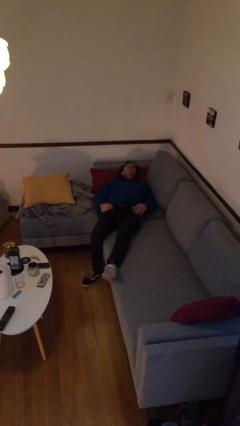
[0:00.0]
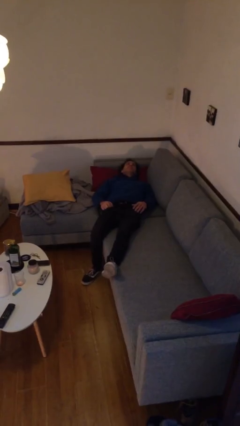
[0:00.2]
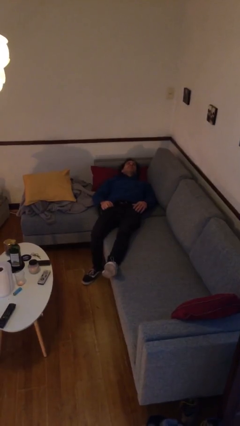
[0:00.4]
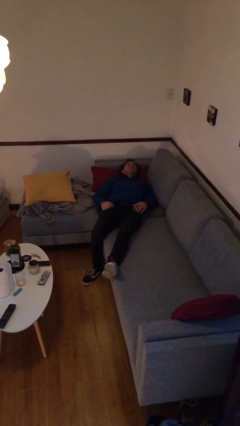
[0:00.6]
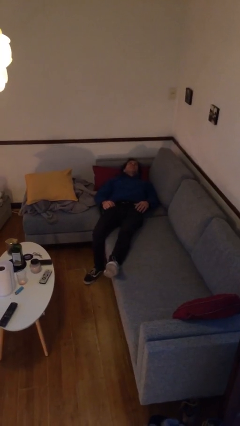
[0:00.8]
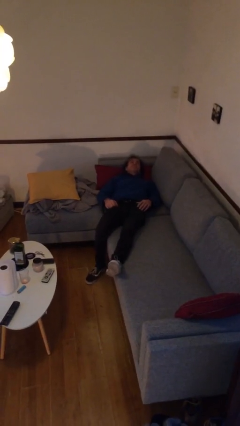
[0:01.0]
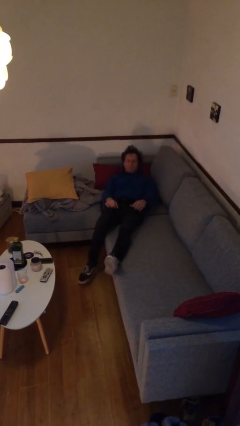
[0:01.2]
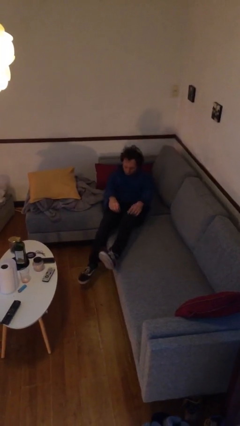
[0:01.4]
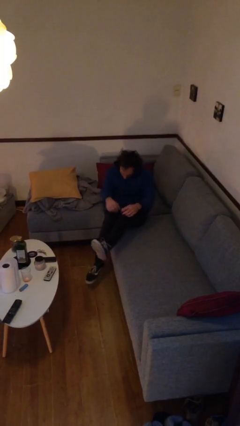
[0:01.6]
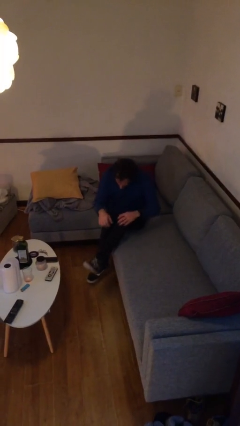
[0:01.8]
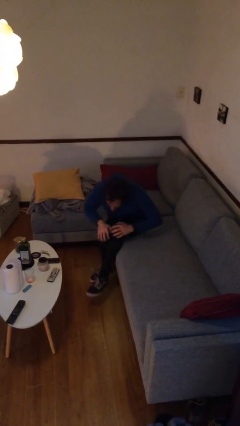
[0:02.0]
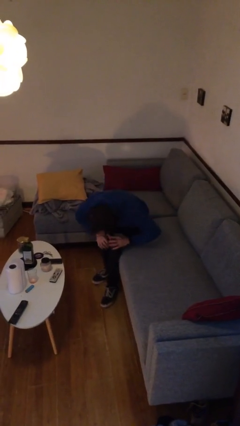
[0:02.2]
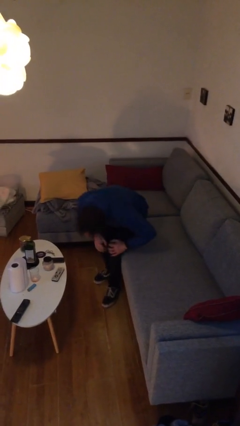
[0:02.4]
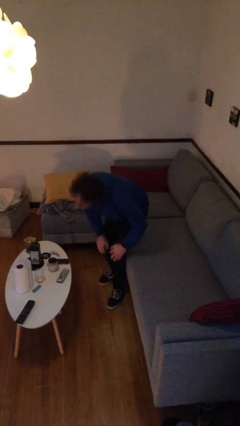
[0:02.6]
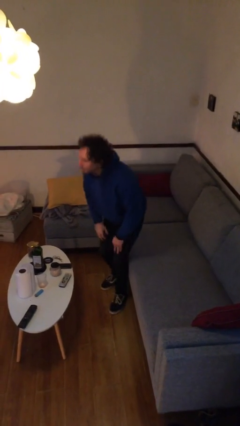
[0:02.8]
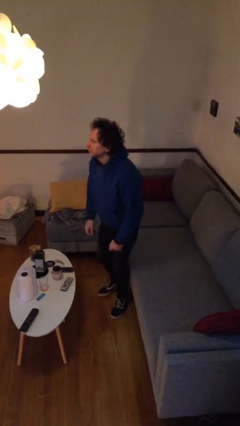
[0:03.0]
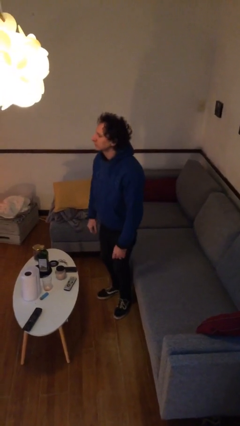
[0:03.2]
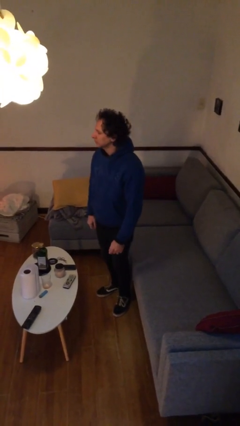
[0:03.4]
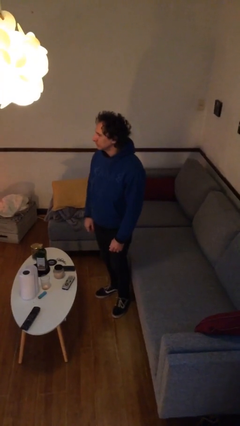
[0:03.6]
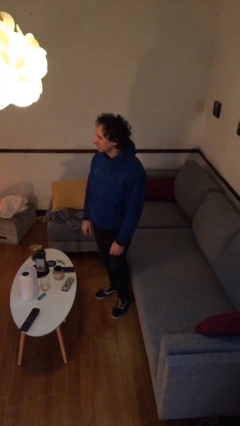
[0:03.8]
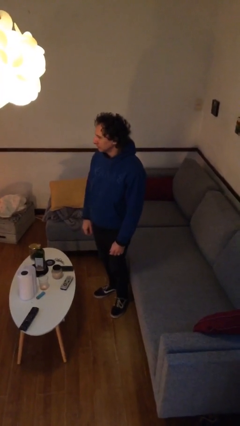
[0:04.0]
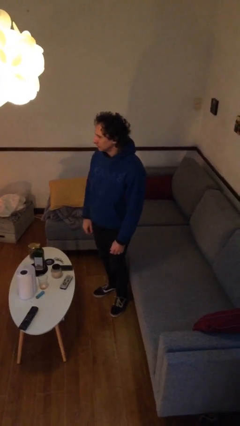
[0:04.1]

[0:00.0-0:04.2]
person stands up

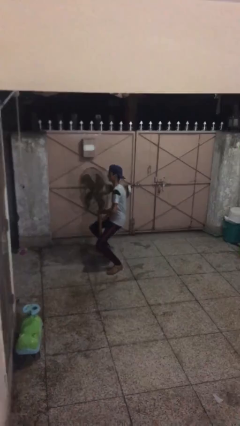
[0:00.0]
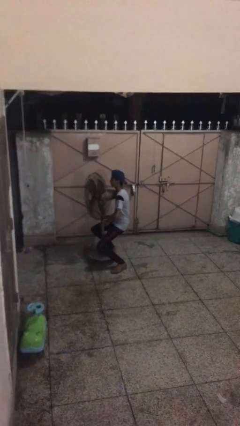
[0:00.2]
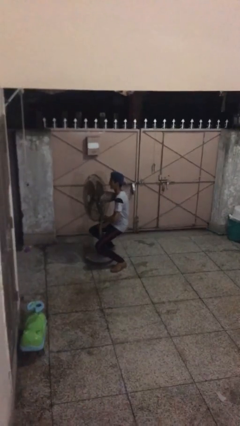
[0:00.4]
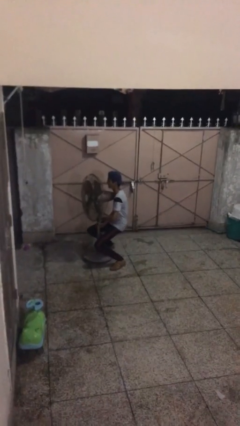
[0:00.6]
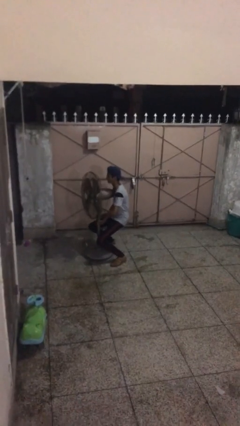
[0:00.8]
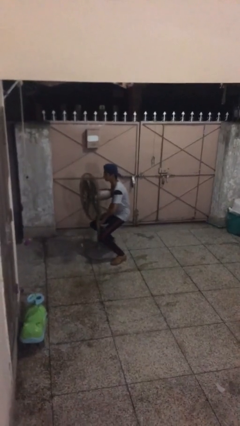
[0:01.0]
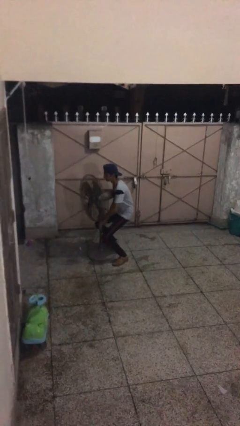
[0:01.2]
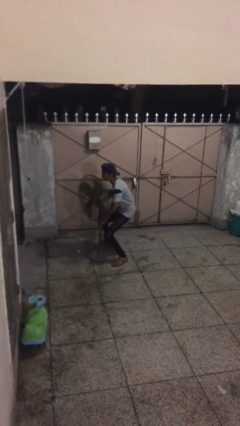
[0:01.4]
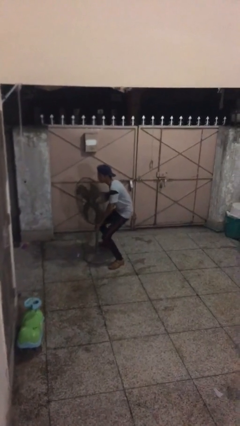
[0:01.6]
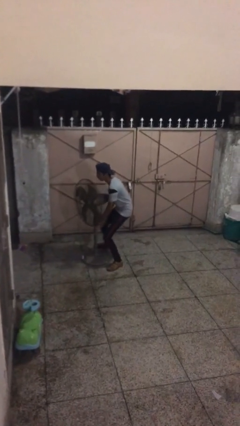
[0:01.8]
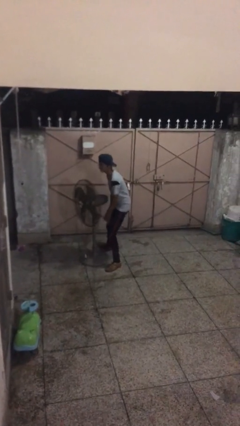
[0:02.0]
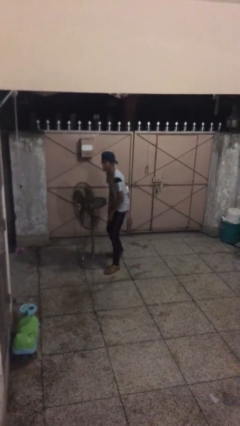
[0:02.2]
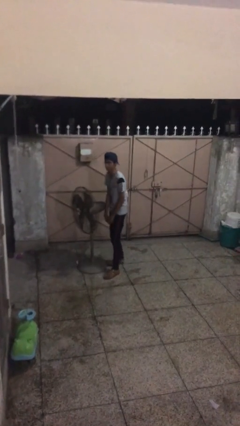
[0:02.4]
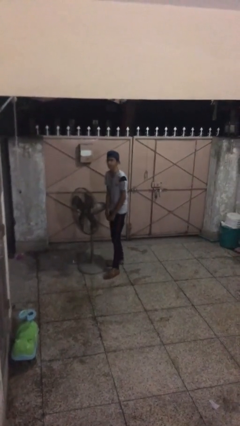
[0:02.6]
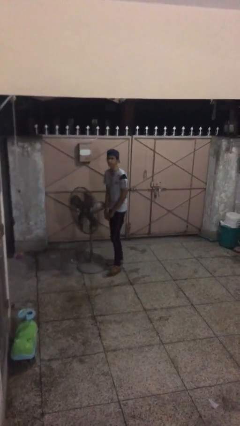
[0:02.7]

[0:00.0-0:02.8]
person puts down object on floor

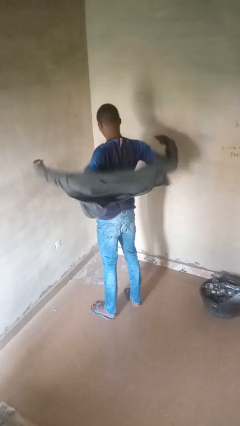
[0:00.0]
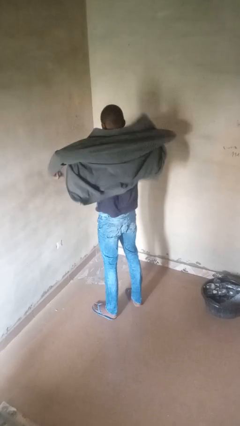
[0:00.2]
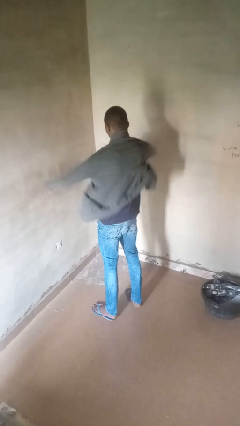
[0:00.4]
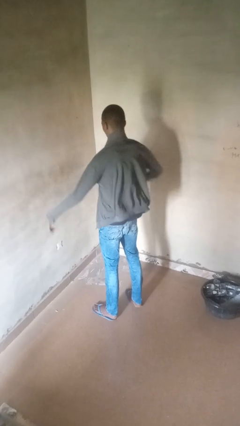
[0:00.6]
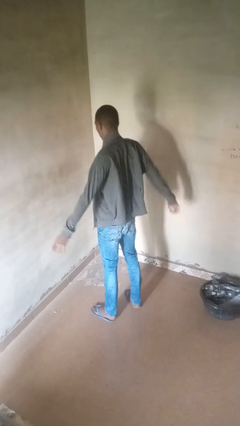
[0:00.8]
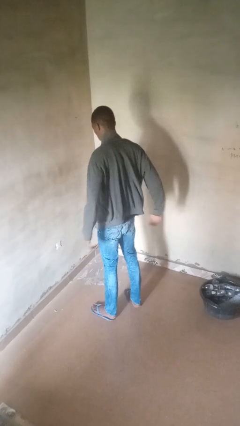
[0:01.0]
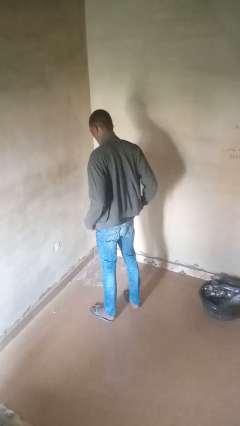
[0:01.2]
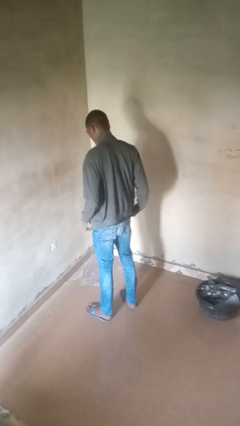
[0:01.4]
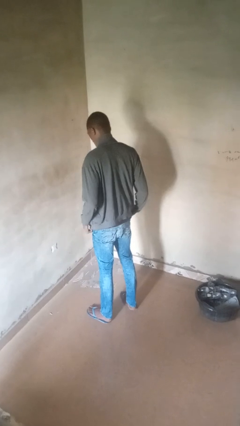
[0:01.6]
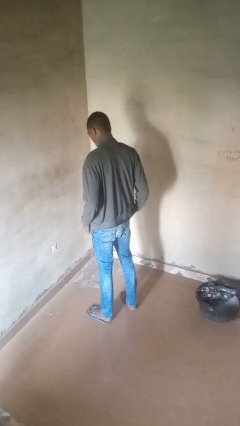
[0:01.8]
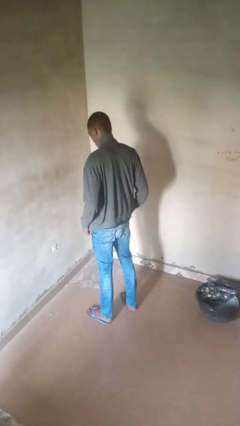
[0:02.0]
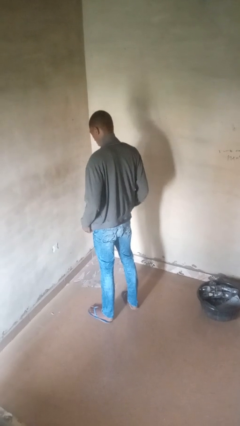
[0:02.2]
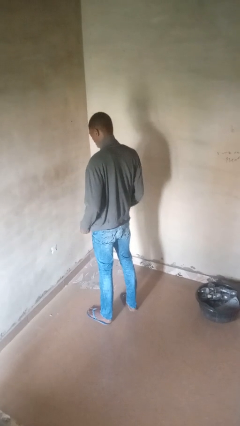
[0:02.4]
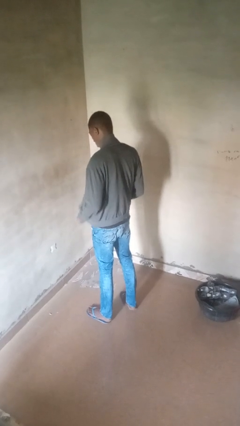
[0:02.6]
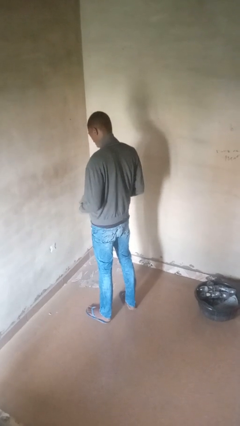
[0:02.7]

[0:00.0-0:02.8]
person puts on jacket

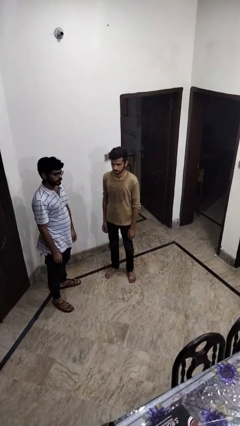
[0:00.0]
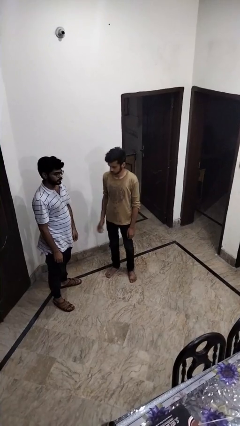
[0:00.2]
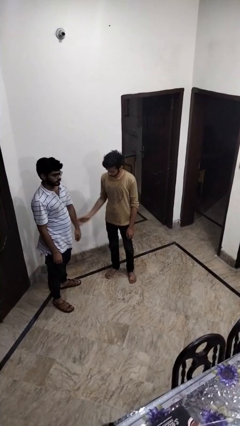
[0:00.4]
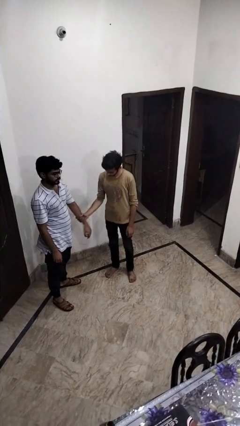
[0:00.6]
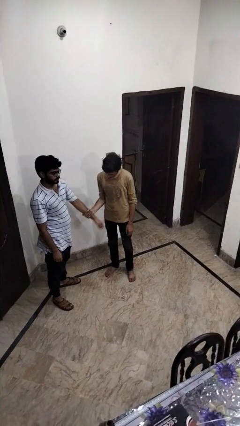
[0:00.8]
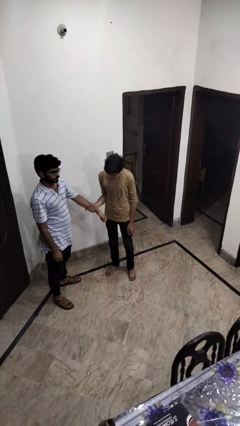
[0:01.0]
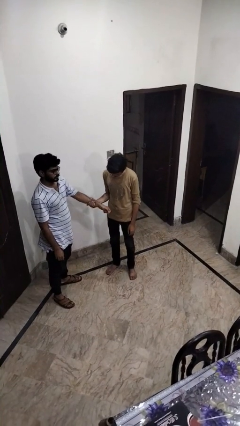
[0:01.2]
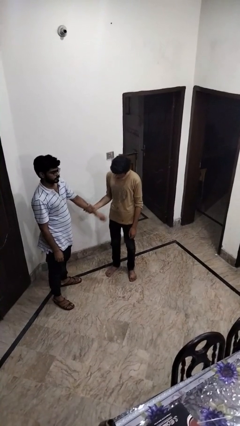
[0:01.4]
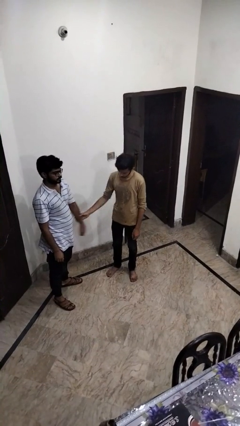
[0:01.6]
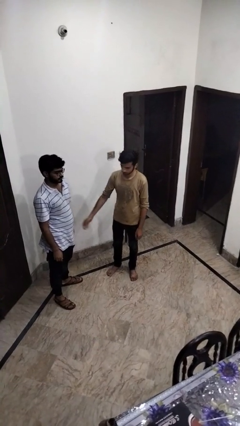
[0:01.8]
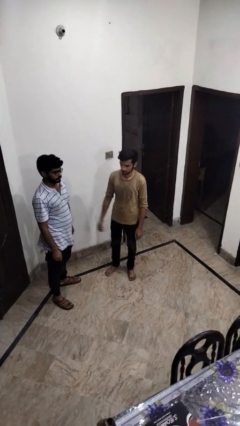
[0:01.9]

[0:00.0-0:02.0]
person grabs person by forearm

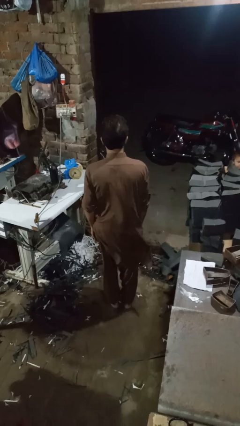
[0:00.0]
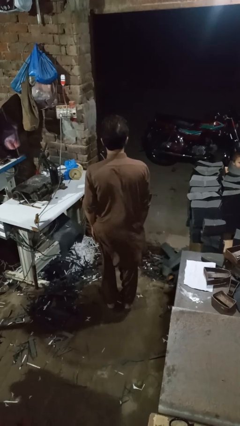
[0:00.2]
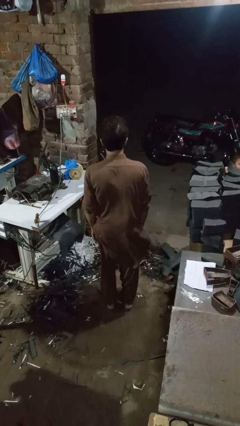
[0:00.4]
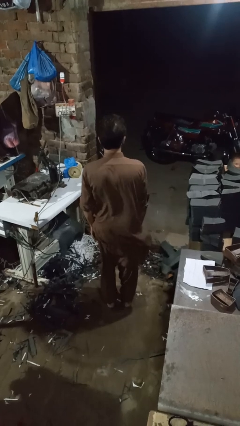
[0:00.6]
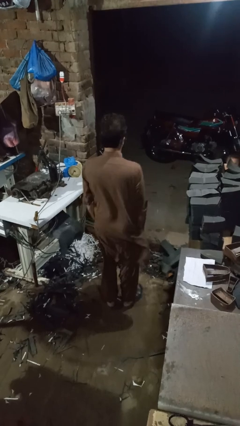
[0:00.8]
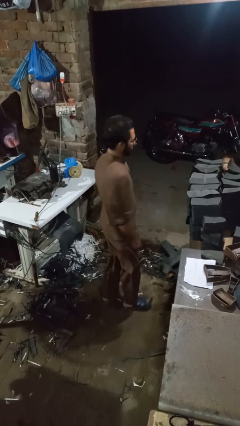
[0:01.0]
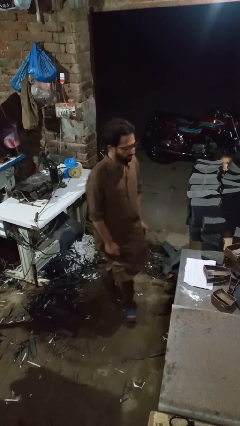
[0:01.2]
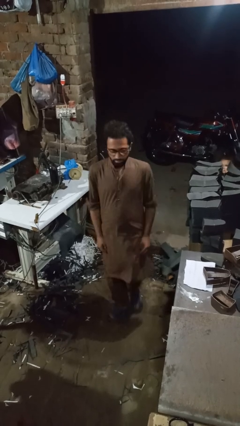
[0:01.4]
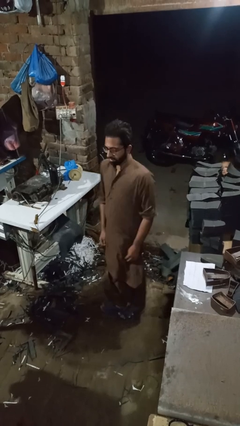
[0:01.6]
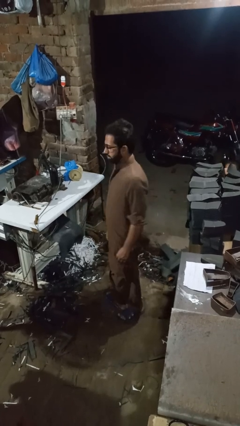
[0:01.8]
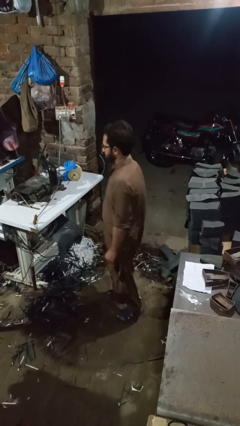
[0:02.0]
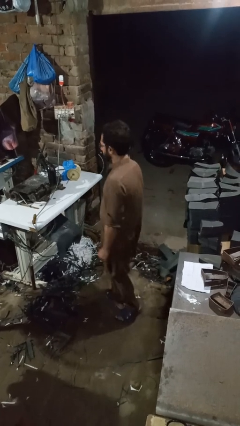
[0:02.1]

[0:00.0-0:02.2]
person twirls

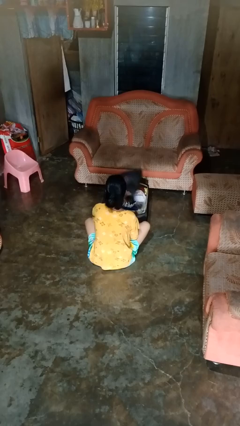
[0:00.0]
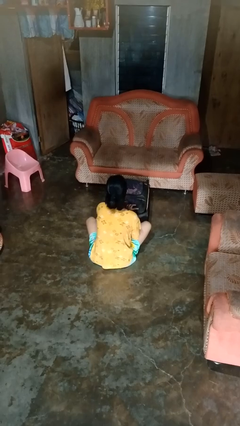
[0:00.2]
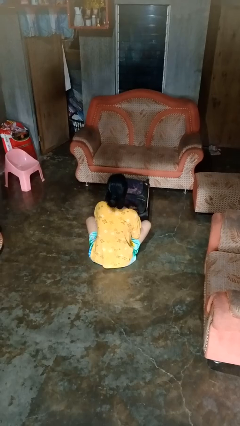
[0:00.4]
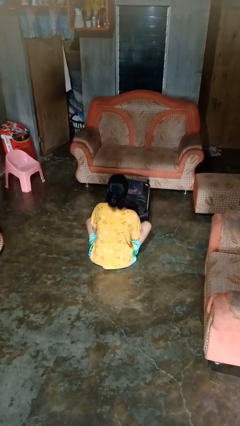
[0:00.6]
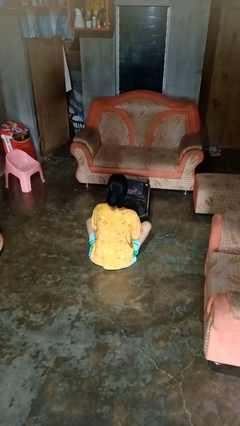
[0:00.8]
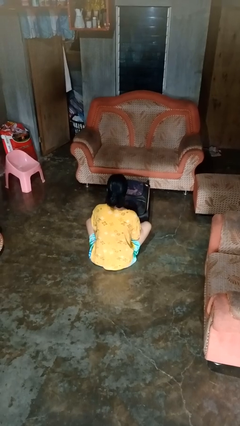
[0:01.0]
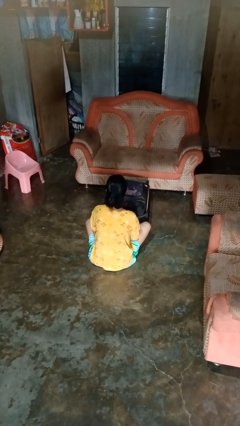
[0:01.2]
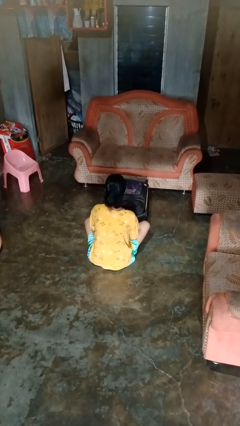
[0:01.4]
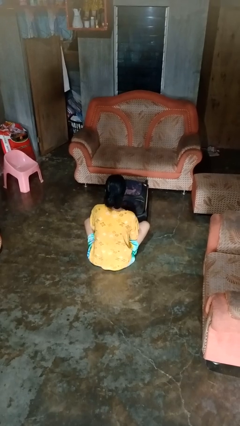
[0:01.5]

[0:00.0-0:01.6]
person closes suitcase

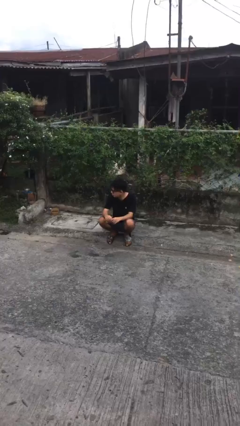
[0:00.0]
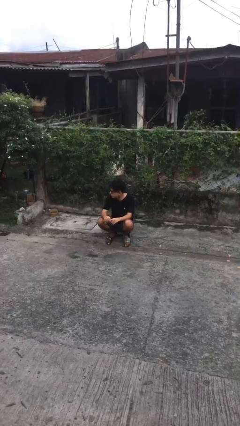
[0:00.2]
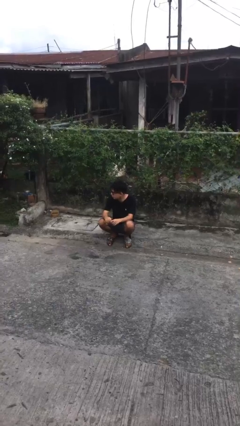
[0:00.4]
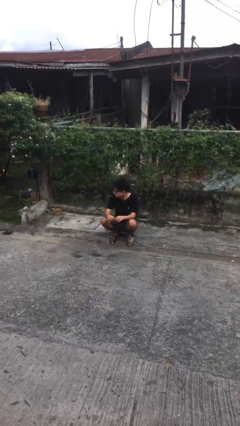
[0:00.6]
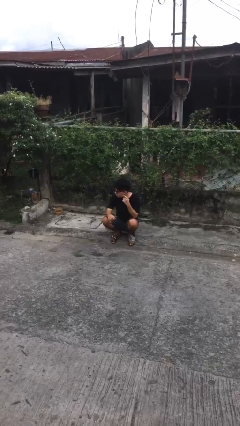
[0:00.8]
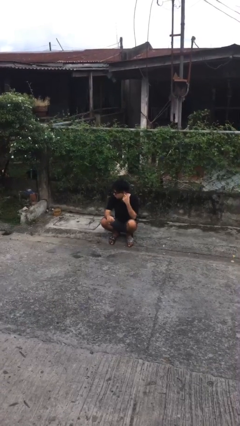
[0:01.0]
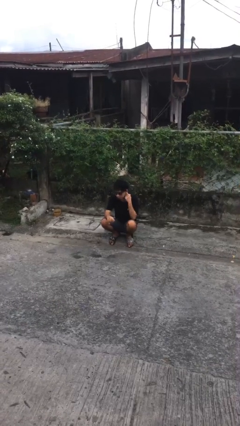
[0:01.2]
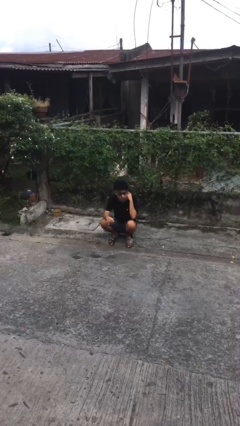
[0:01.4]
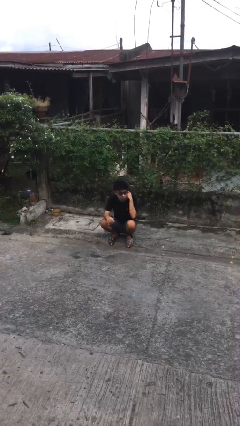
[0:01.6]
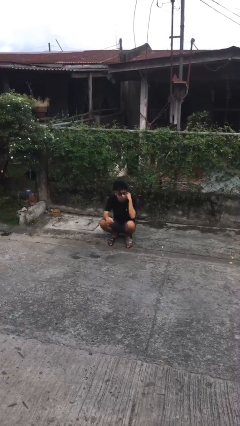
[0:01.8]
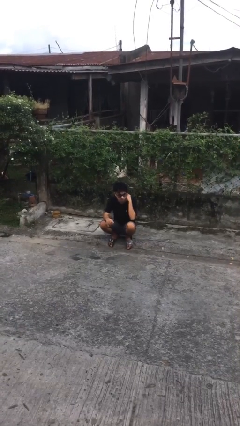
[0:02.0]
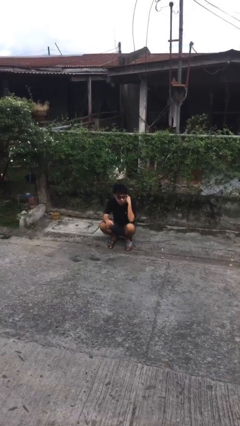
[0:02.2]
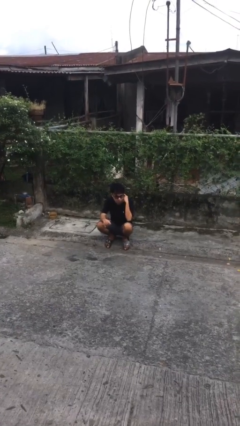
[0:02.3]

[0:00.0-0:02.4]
person touches earlobe
